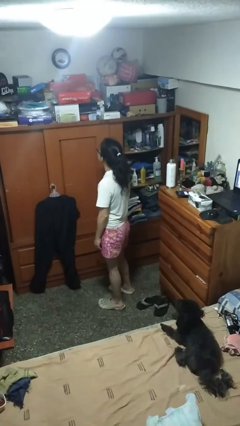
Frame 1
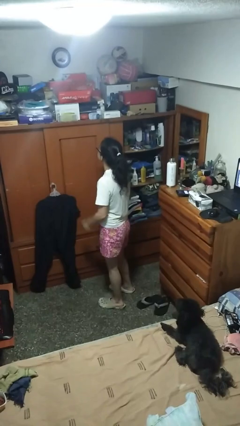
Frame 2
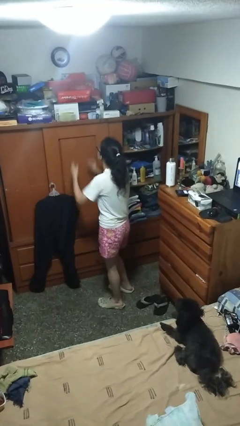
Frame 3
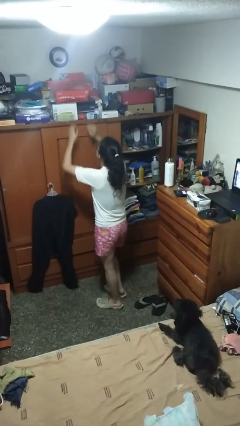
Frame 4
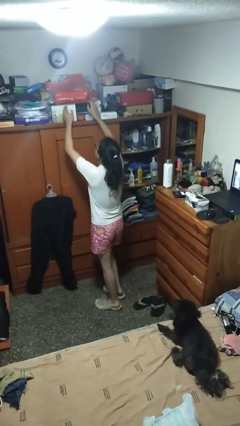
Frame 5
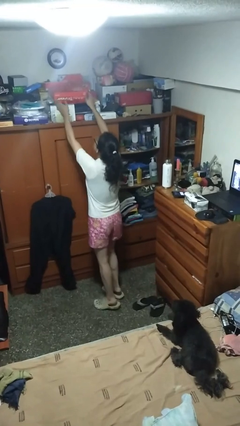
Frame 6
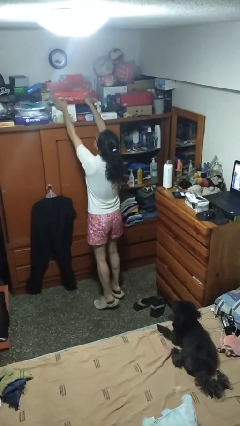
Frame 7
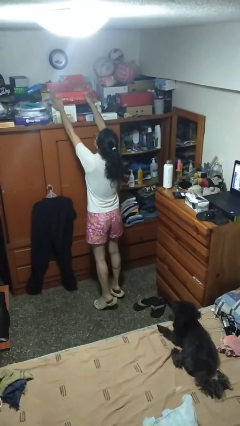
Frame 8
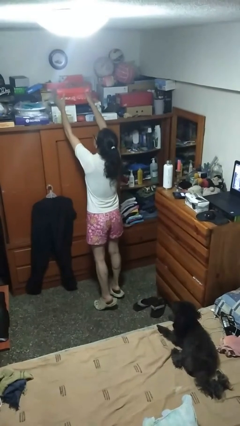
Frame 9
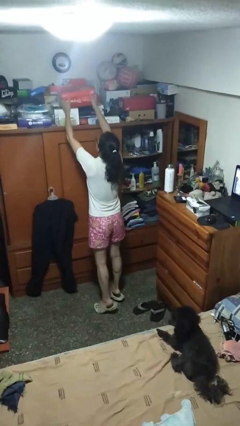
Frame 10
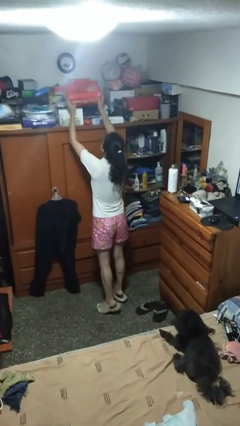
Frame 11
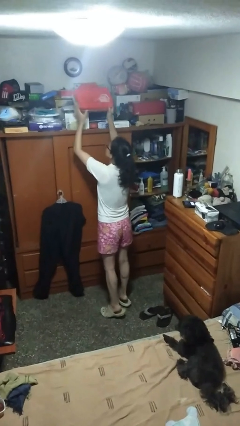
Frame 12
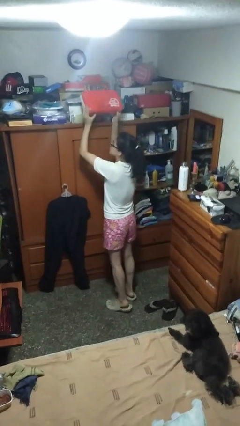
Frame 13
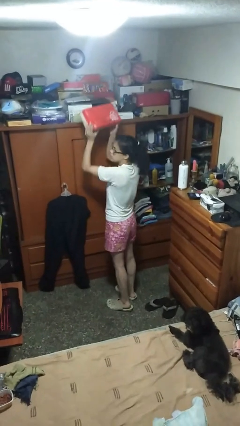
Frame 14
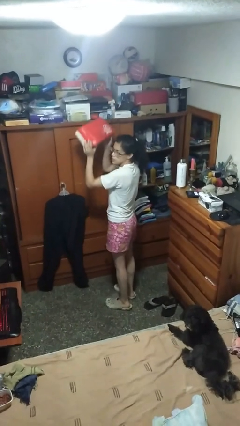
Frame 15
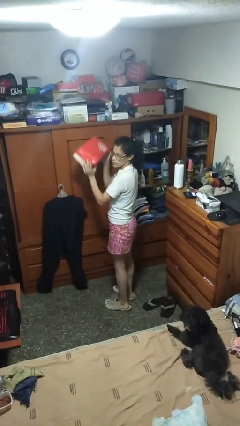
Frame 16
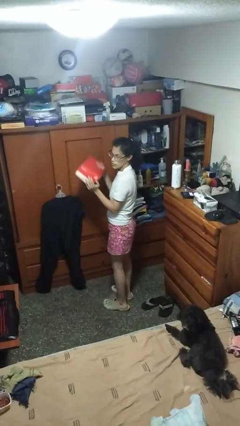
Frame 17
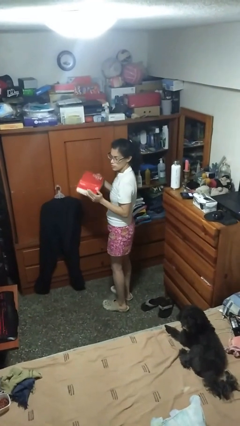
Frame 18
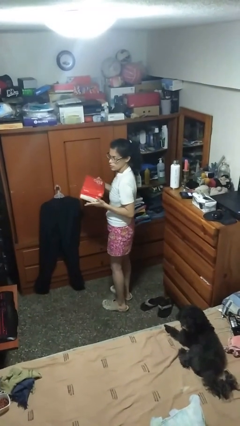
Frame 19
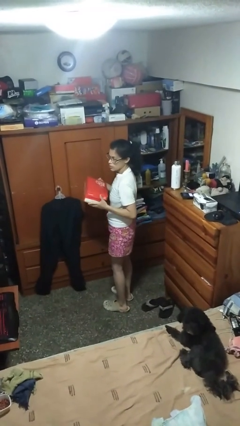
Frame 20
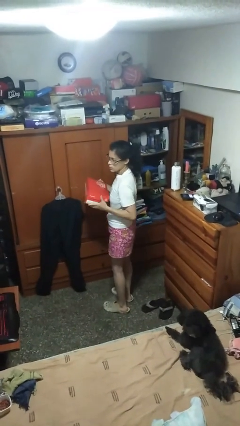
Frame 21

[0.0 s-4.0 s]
person picks up object from shelf

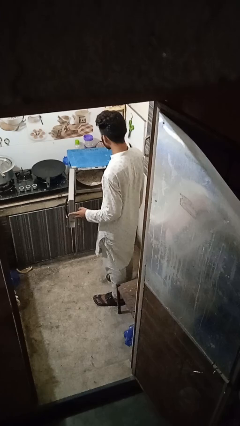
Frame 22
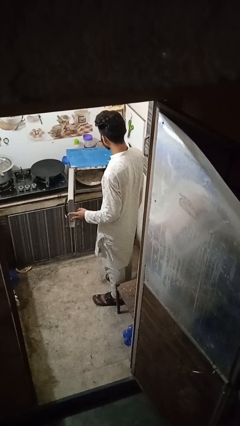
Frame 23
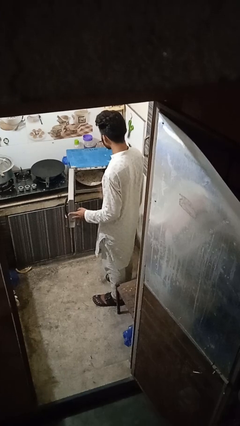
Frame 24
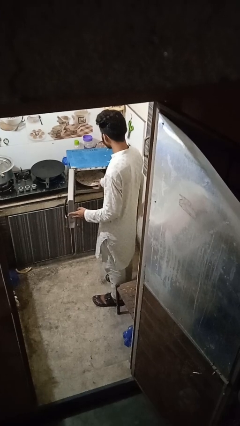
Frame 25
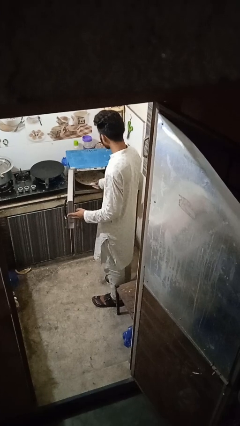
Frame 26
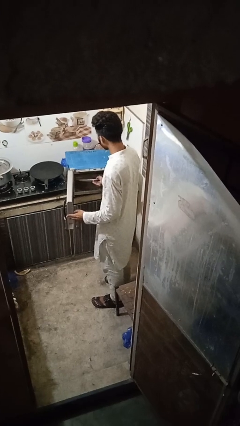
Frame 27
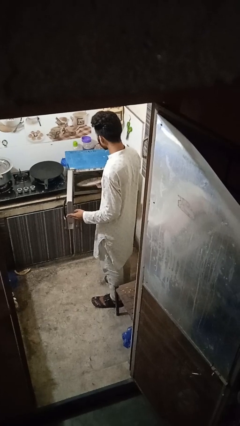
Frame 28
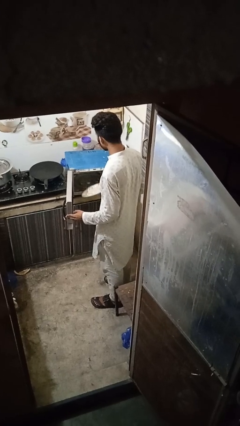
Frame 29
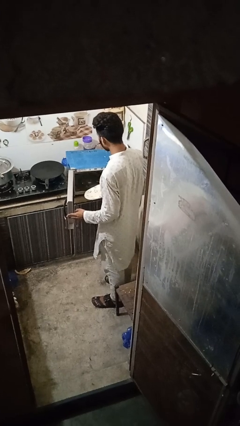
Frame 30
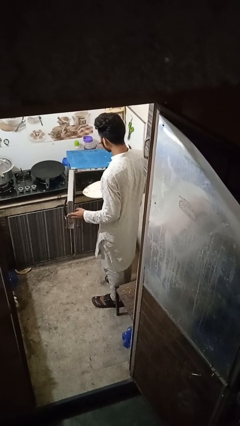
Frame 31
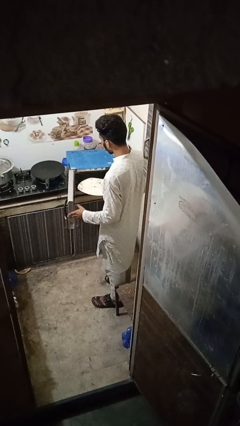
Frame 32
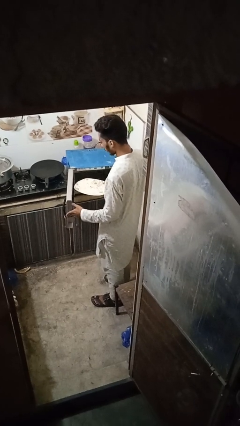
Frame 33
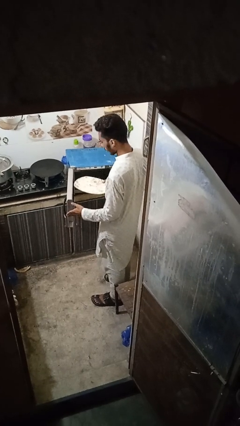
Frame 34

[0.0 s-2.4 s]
person takes object from oven

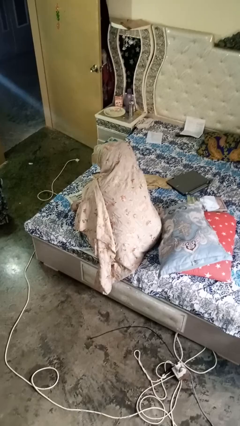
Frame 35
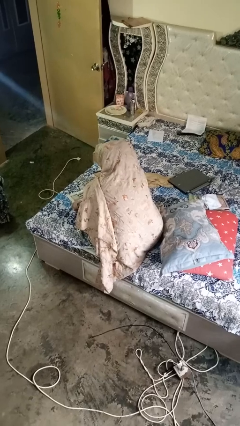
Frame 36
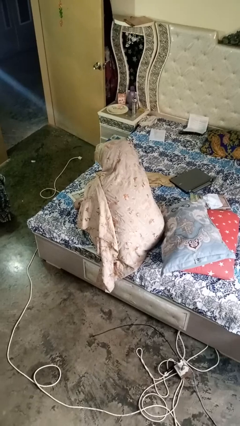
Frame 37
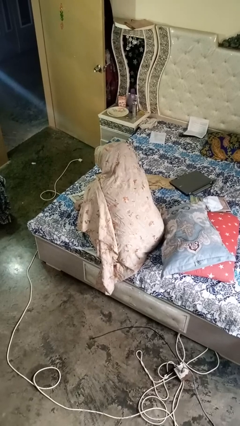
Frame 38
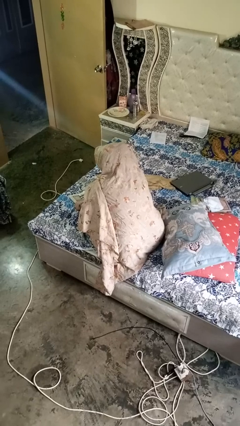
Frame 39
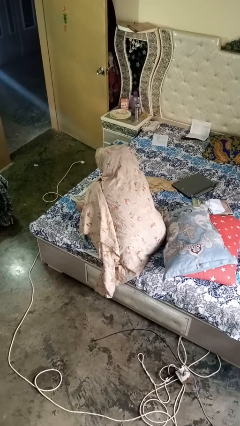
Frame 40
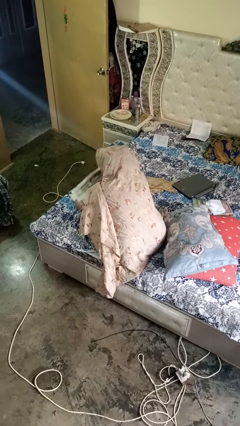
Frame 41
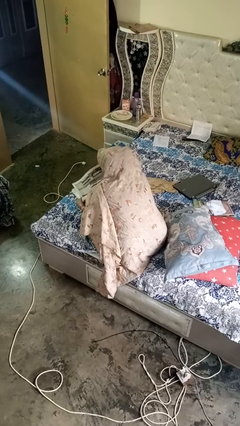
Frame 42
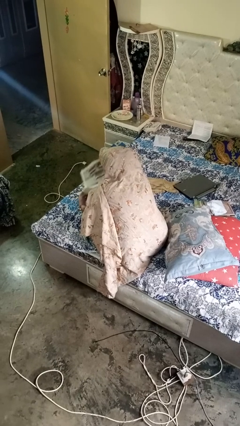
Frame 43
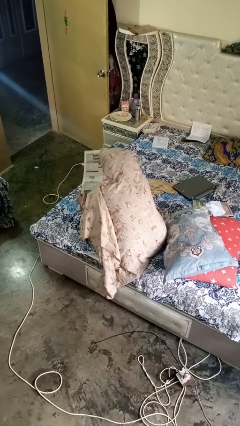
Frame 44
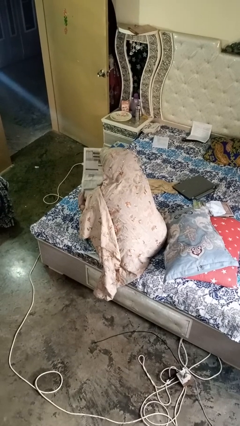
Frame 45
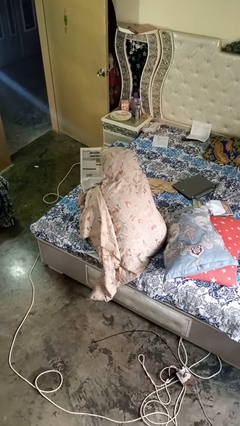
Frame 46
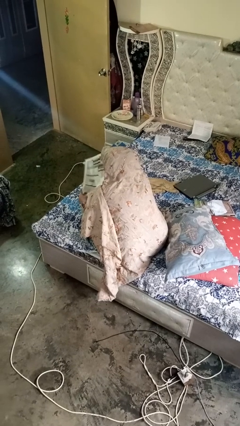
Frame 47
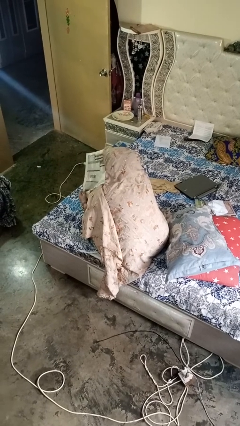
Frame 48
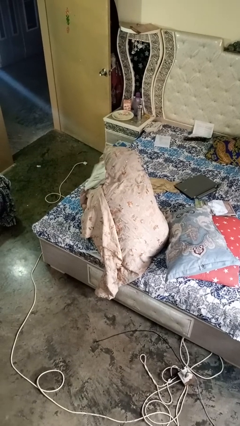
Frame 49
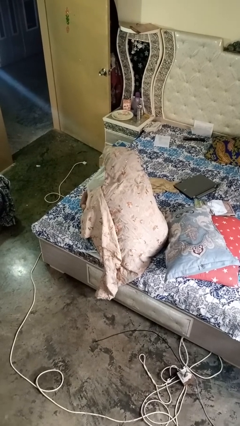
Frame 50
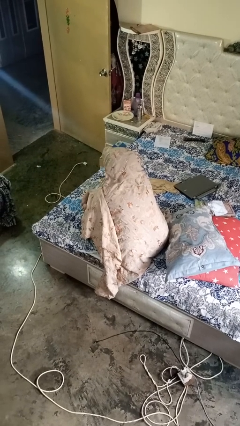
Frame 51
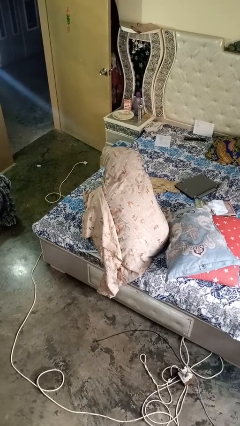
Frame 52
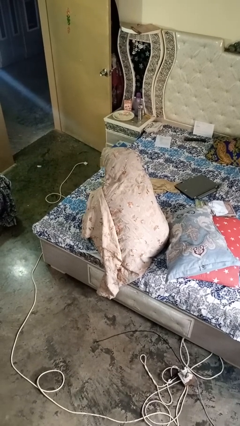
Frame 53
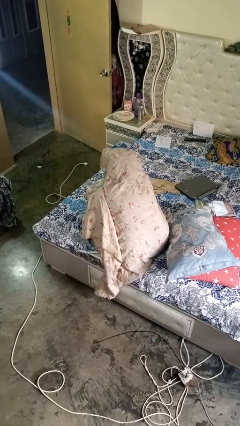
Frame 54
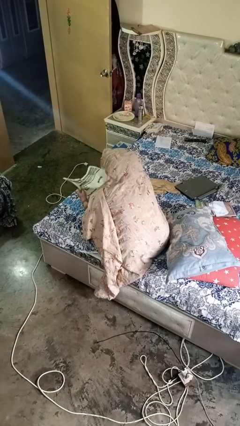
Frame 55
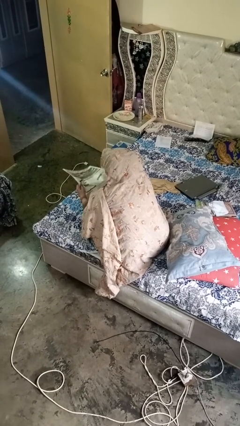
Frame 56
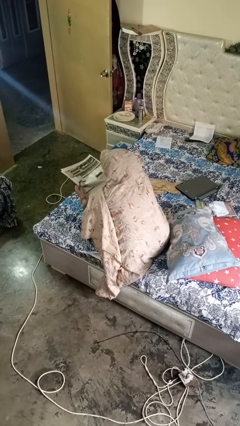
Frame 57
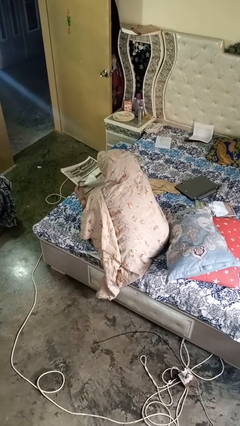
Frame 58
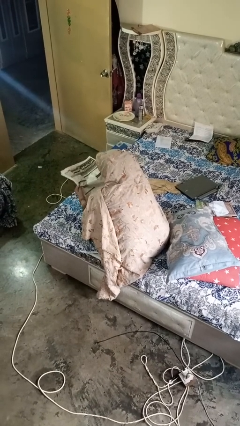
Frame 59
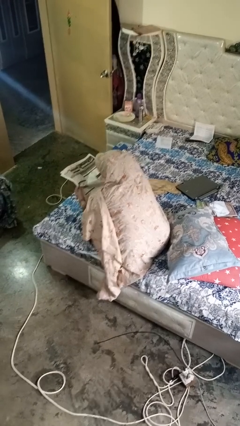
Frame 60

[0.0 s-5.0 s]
person reads newspaper

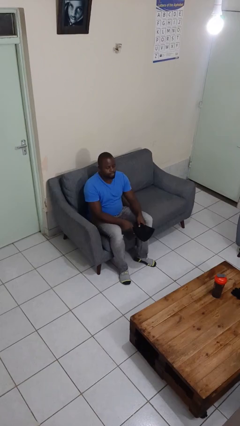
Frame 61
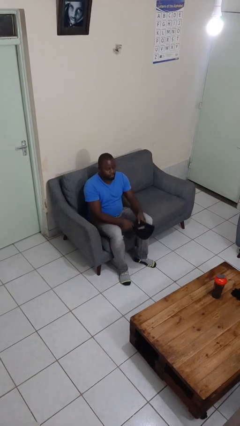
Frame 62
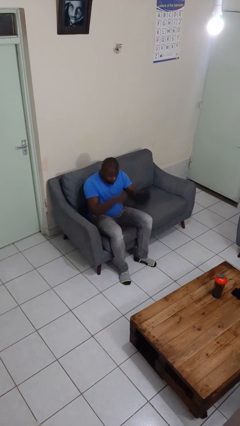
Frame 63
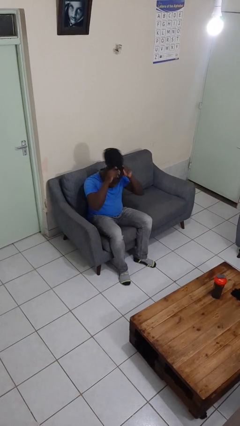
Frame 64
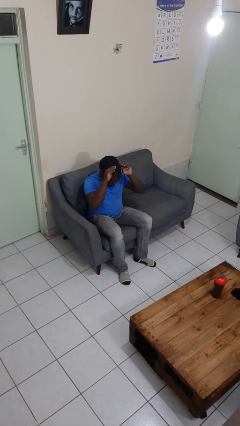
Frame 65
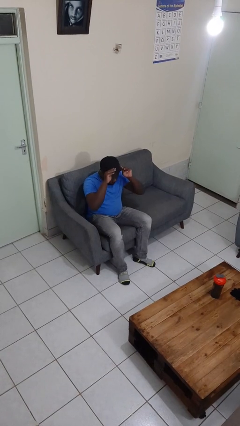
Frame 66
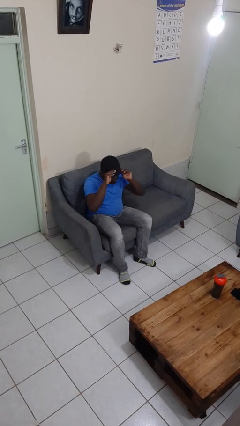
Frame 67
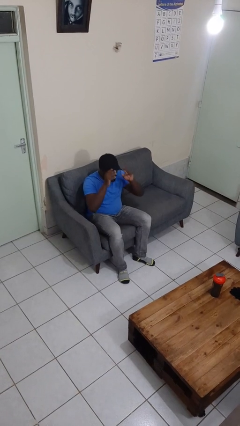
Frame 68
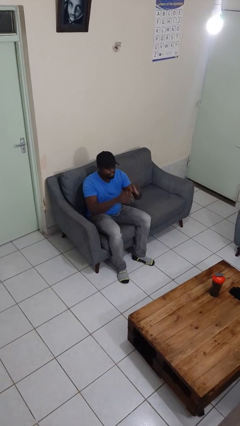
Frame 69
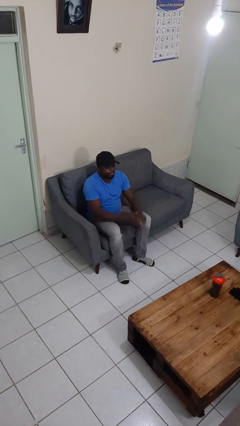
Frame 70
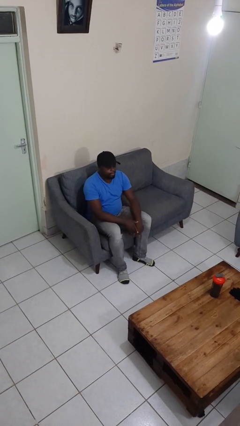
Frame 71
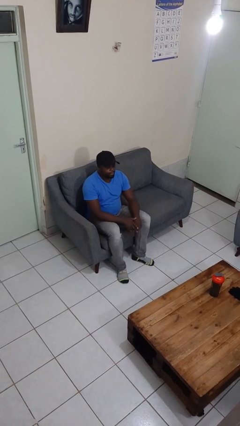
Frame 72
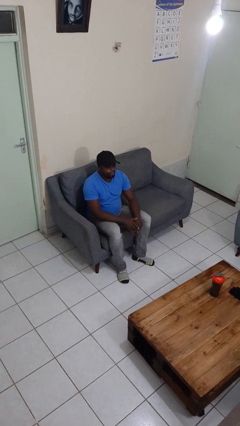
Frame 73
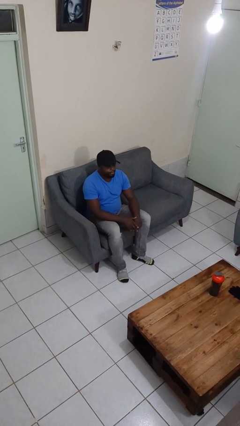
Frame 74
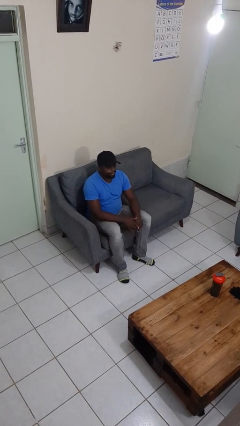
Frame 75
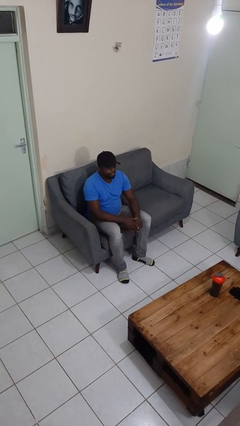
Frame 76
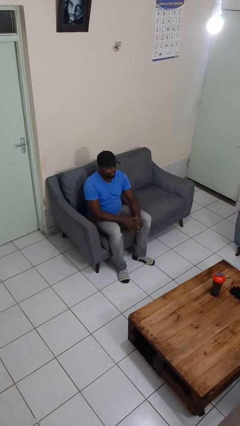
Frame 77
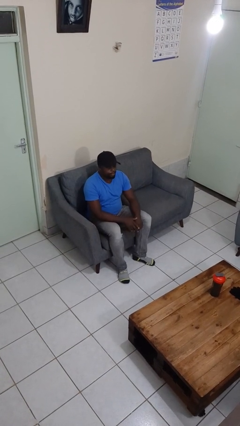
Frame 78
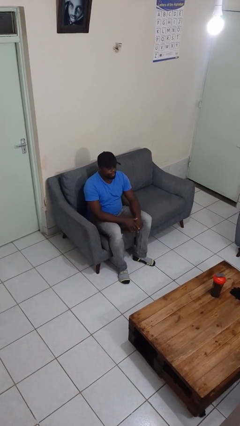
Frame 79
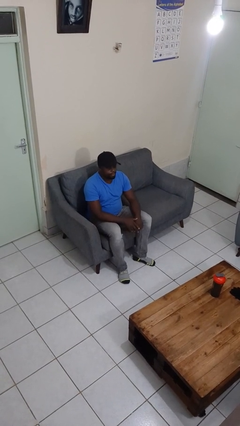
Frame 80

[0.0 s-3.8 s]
person puts on hat

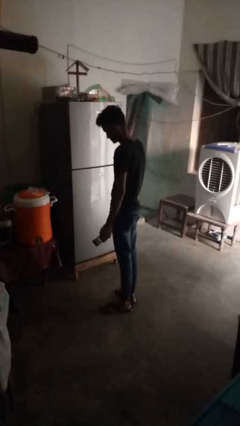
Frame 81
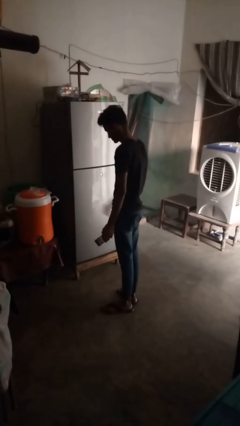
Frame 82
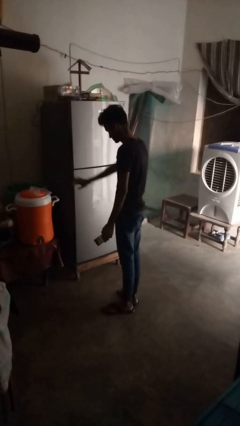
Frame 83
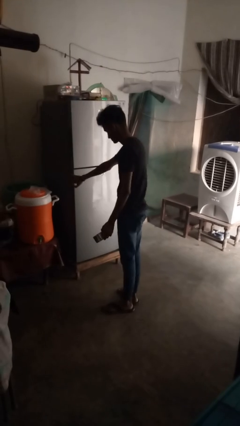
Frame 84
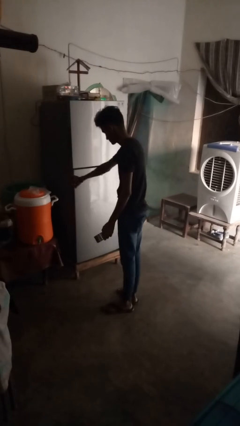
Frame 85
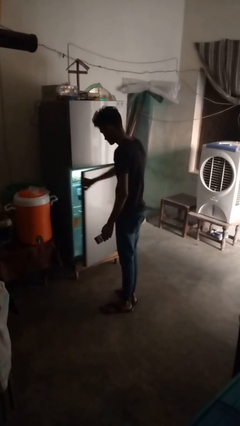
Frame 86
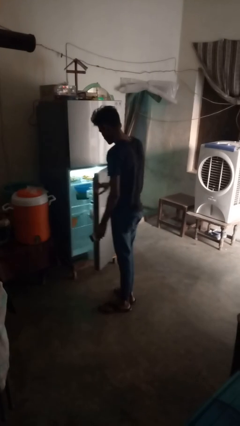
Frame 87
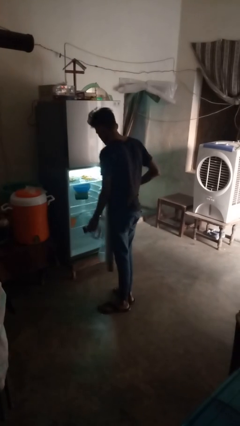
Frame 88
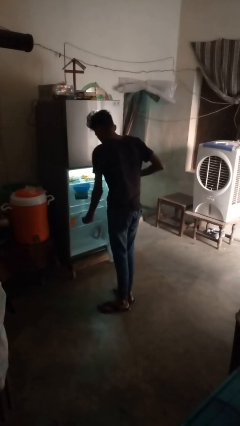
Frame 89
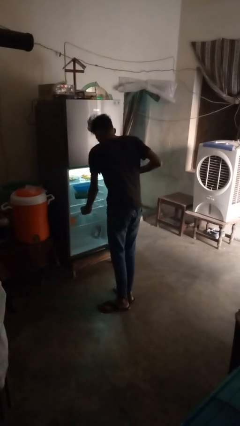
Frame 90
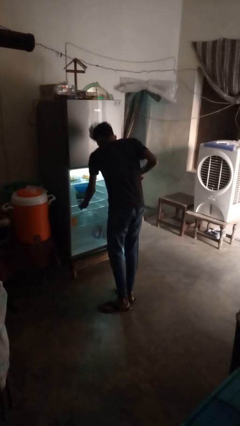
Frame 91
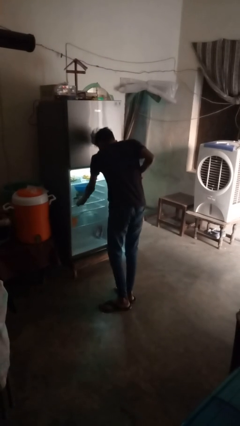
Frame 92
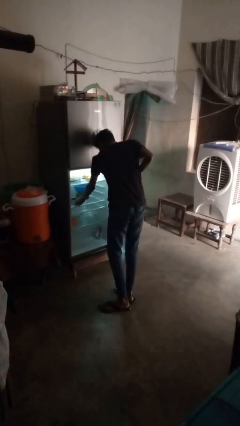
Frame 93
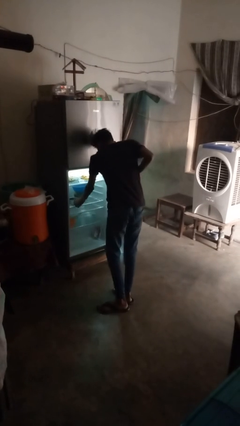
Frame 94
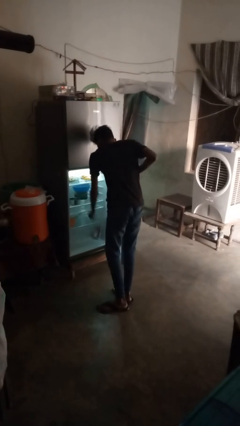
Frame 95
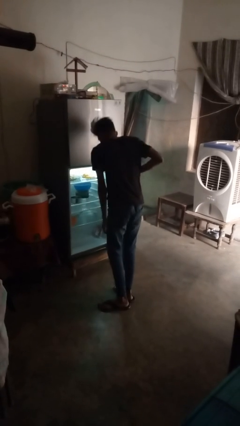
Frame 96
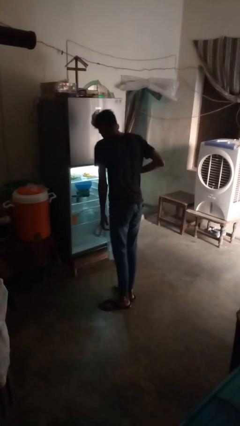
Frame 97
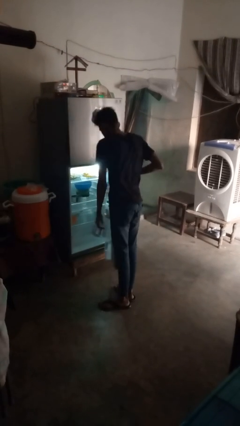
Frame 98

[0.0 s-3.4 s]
person puts object into refrigerator
